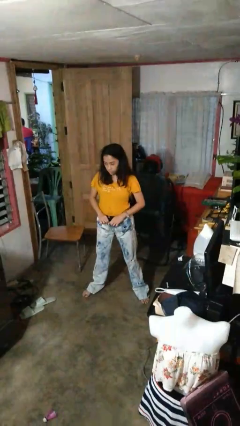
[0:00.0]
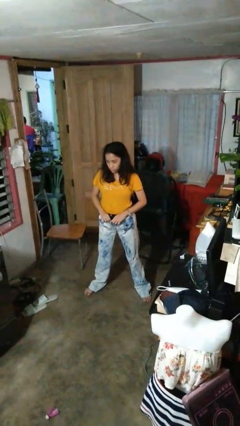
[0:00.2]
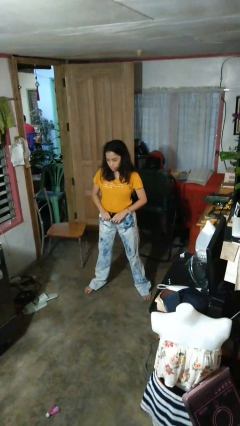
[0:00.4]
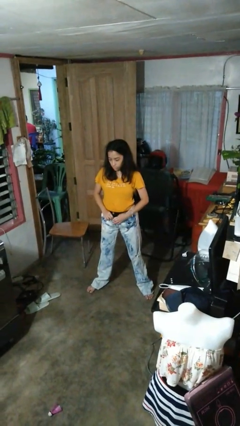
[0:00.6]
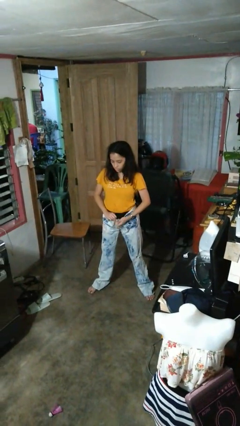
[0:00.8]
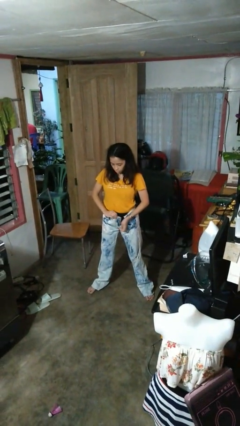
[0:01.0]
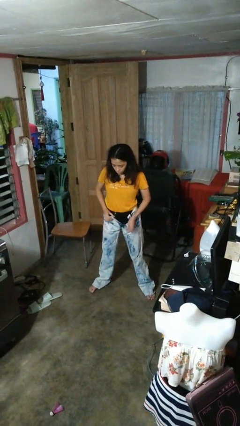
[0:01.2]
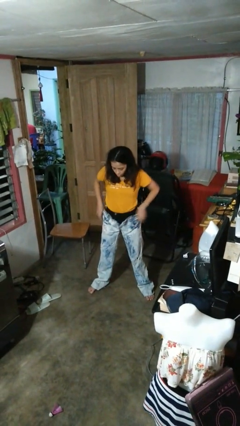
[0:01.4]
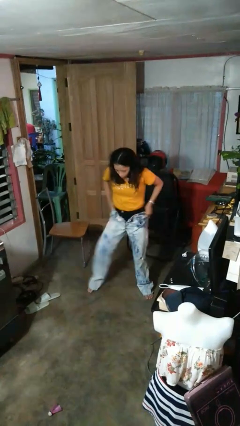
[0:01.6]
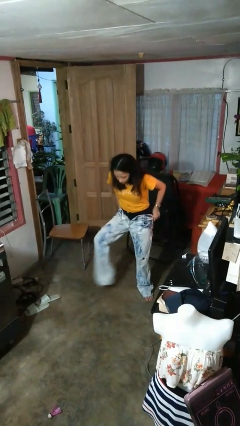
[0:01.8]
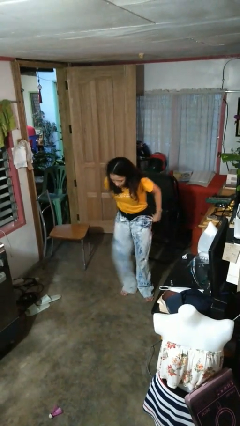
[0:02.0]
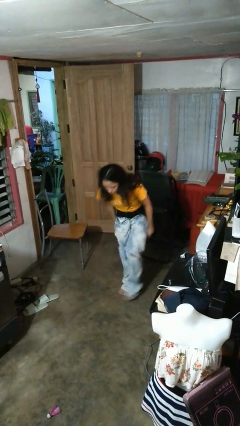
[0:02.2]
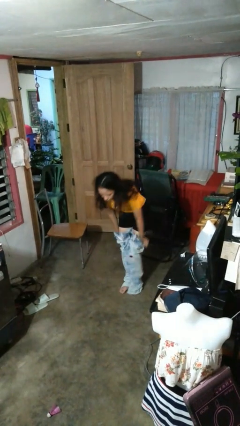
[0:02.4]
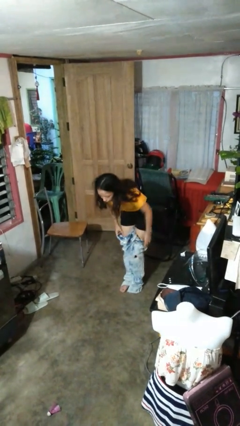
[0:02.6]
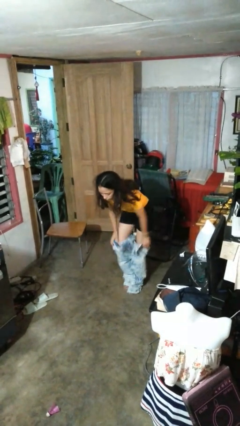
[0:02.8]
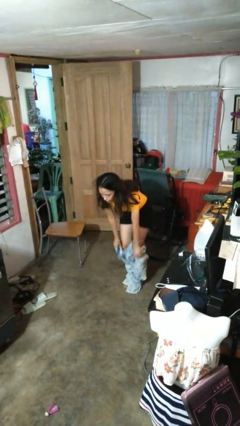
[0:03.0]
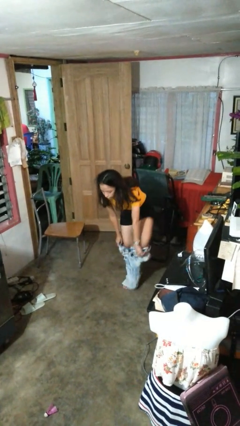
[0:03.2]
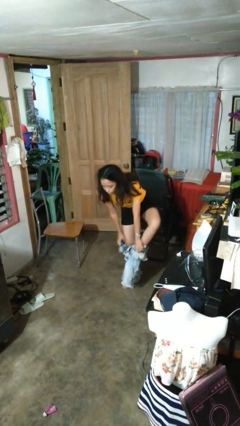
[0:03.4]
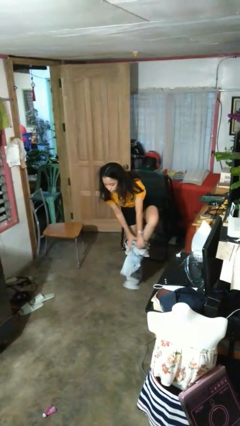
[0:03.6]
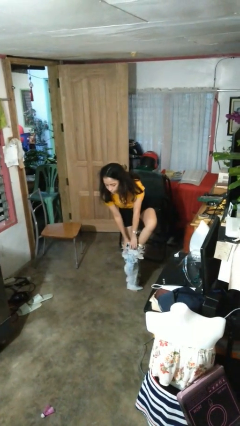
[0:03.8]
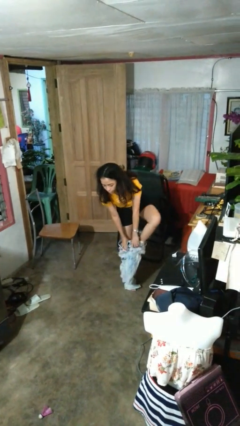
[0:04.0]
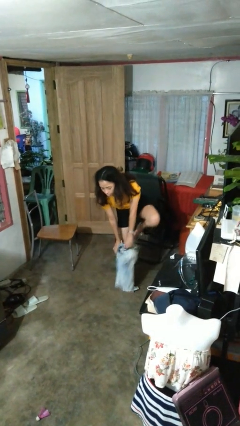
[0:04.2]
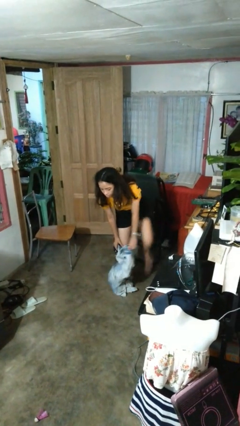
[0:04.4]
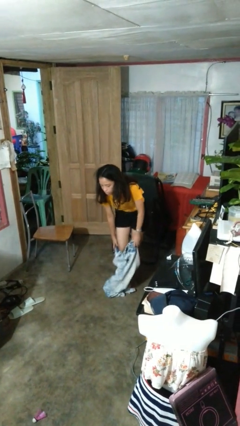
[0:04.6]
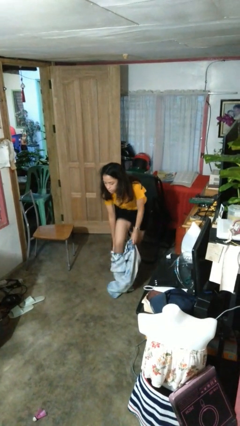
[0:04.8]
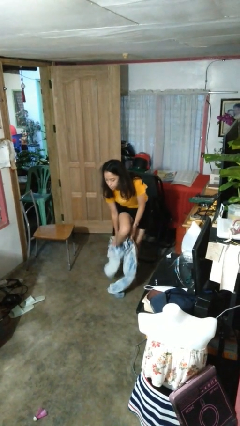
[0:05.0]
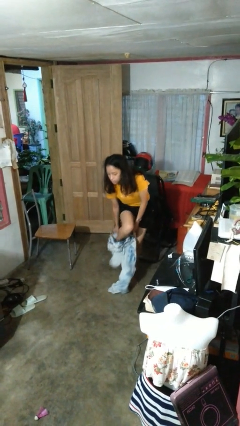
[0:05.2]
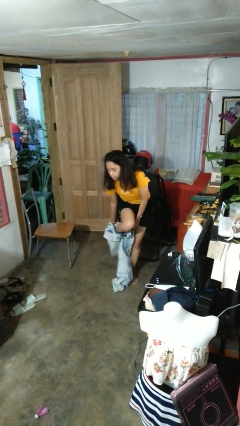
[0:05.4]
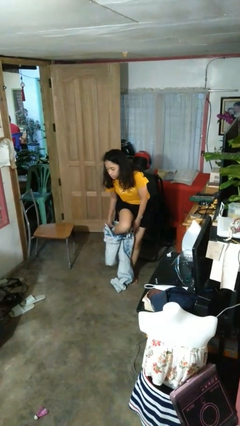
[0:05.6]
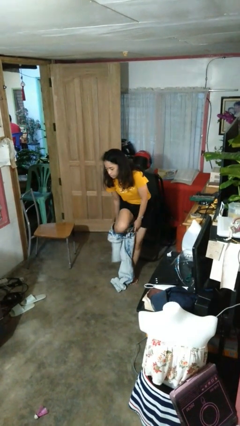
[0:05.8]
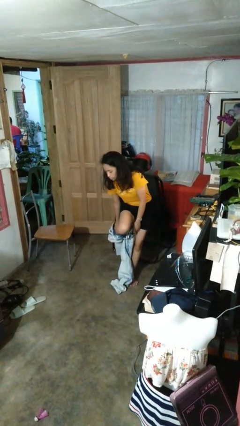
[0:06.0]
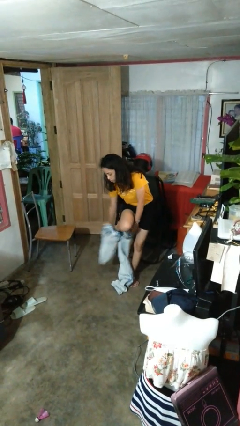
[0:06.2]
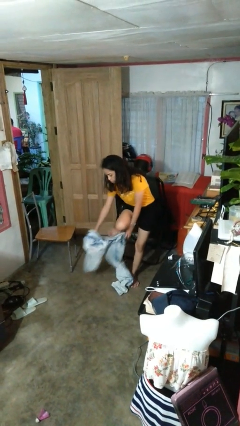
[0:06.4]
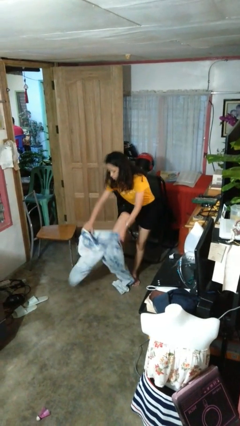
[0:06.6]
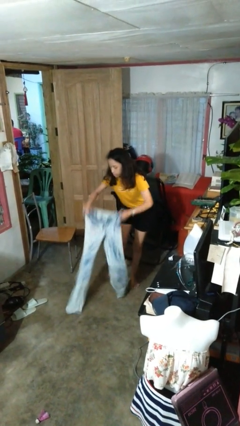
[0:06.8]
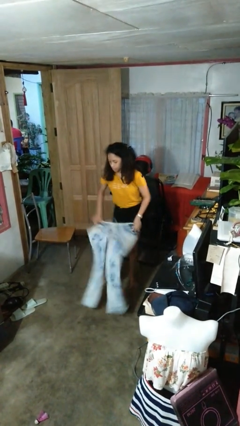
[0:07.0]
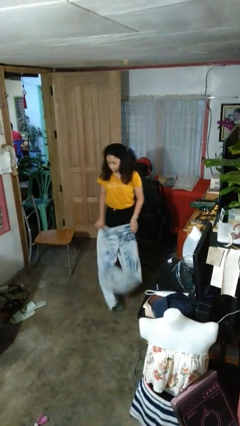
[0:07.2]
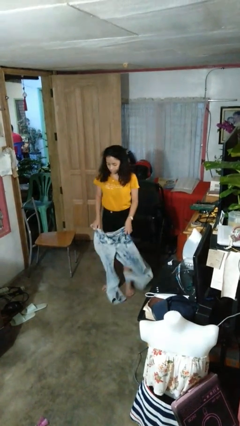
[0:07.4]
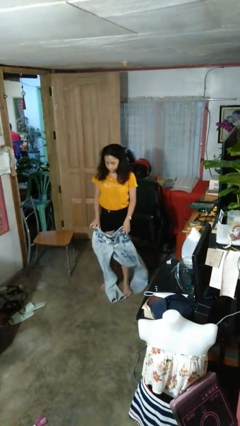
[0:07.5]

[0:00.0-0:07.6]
person takes off pants

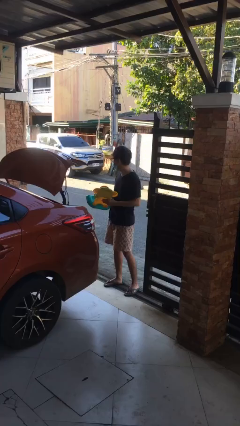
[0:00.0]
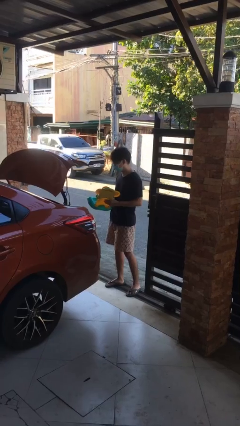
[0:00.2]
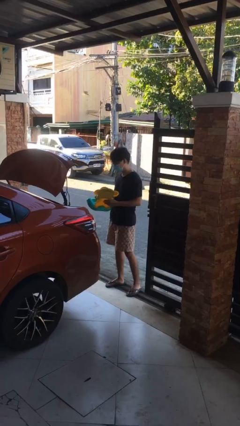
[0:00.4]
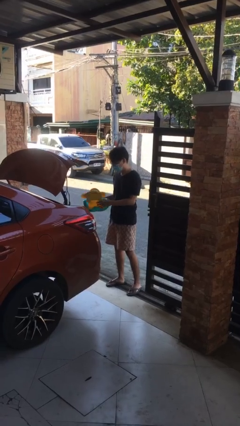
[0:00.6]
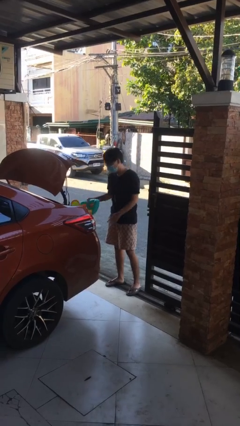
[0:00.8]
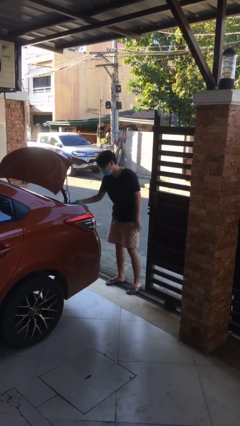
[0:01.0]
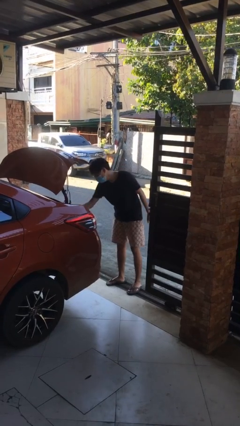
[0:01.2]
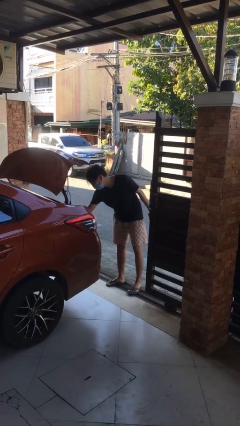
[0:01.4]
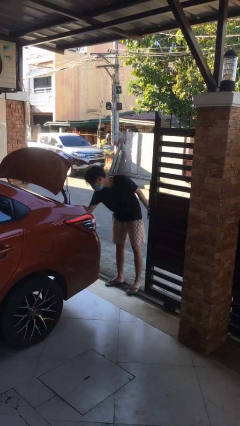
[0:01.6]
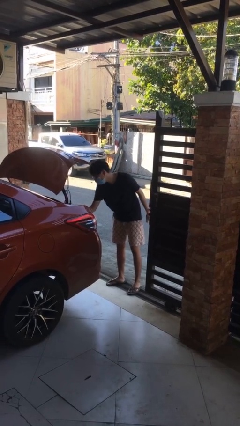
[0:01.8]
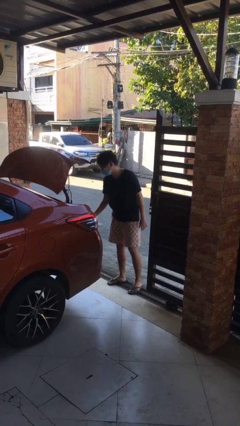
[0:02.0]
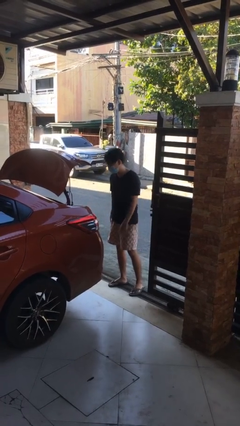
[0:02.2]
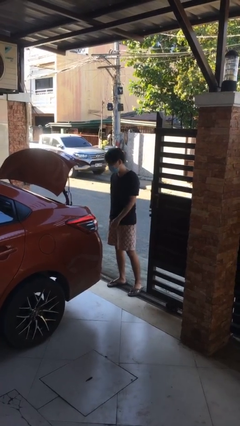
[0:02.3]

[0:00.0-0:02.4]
person loads car

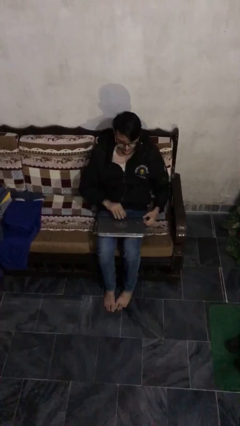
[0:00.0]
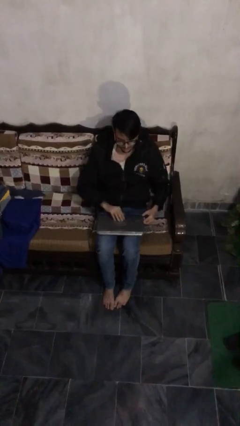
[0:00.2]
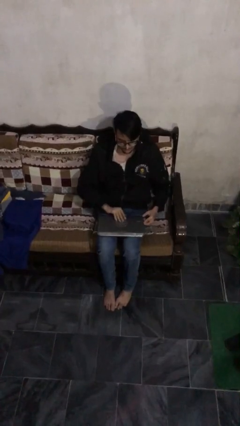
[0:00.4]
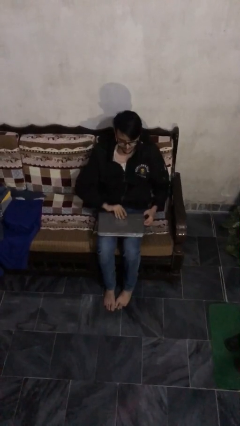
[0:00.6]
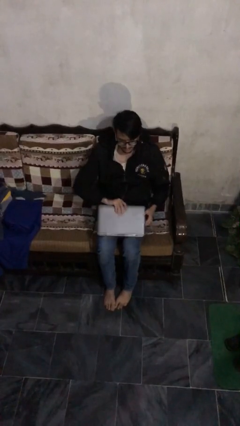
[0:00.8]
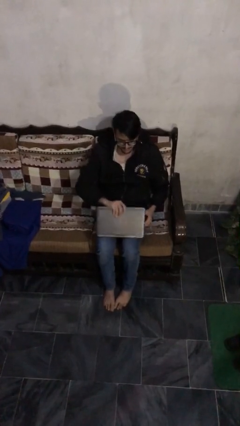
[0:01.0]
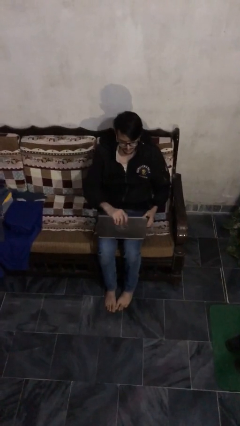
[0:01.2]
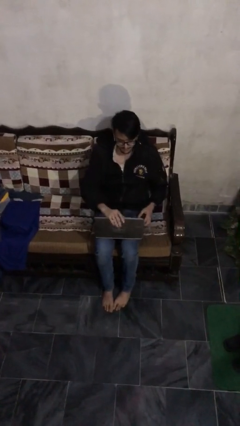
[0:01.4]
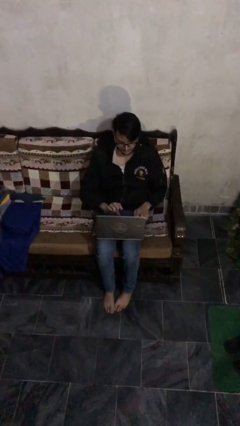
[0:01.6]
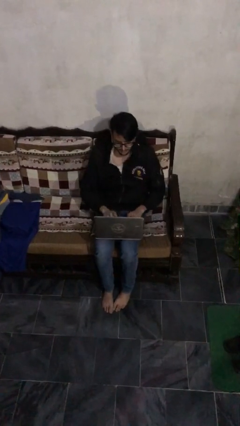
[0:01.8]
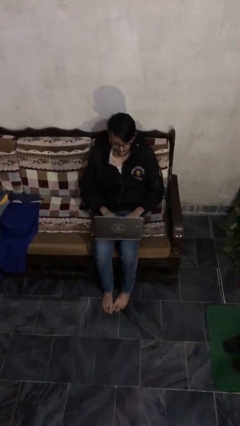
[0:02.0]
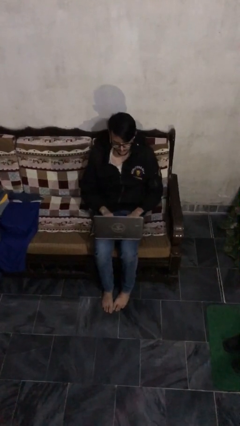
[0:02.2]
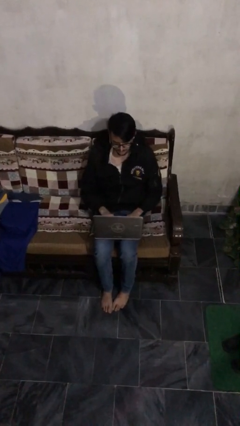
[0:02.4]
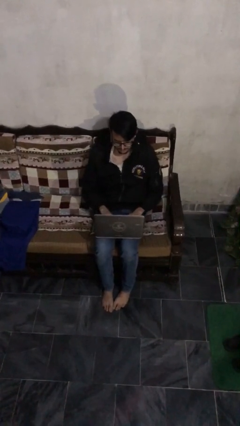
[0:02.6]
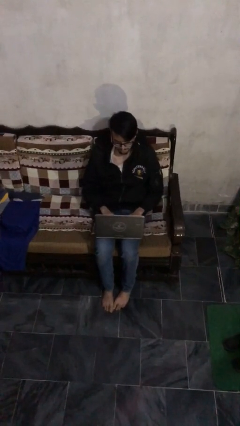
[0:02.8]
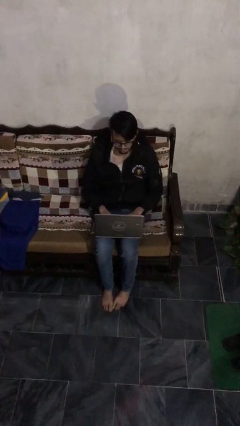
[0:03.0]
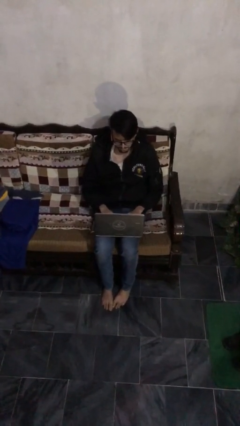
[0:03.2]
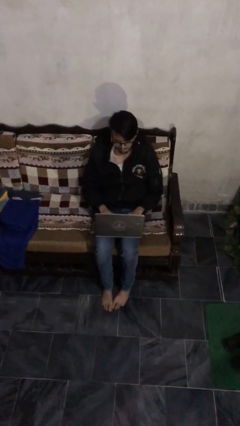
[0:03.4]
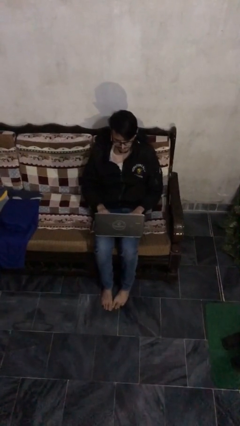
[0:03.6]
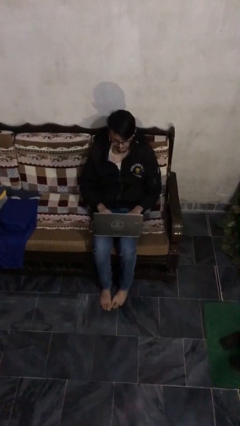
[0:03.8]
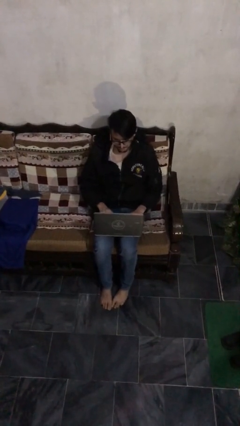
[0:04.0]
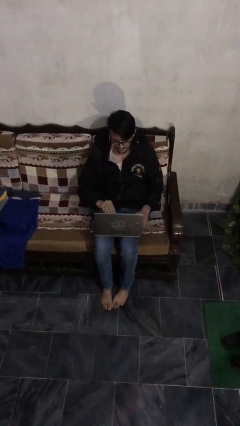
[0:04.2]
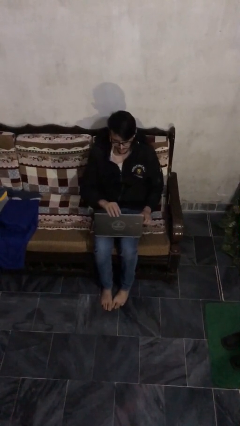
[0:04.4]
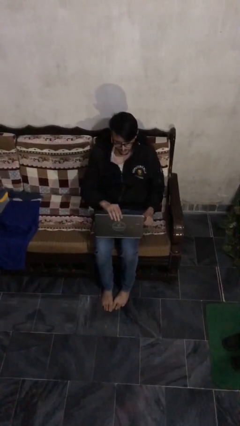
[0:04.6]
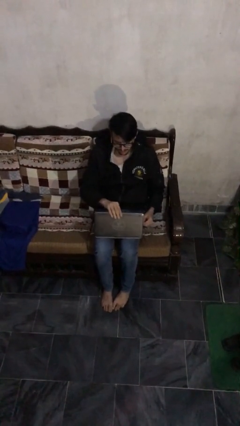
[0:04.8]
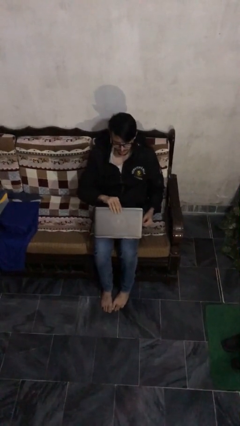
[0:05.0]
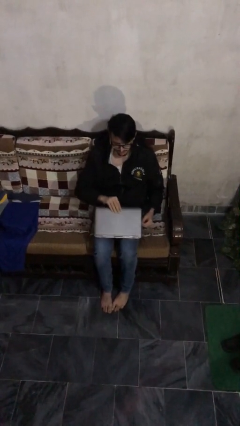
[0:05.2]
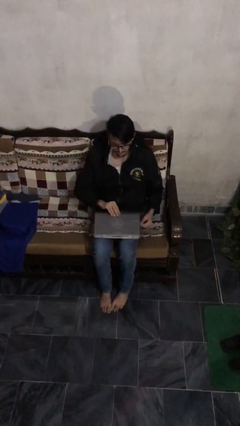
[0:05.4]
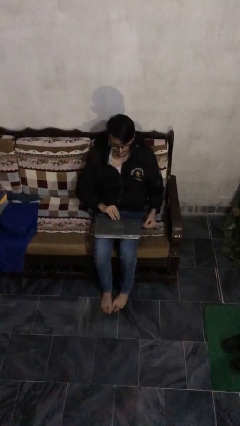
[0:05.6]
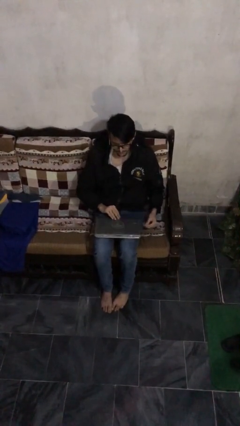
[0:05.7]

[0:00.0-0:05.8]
person interacts with laptop

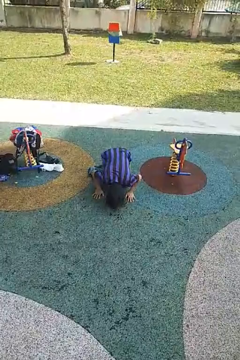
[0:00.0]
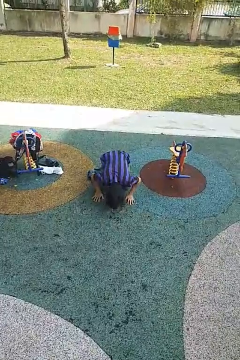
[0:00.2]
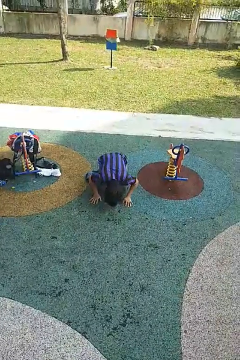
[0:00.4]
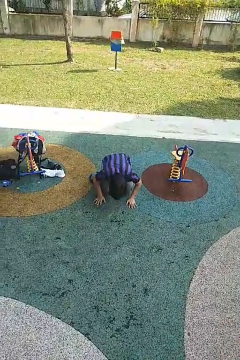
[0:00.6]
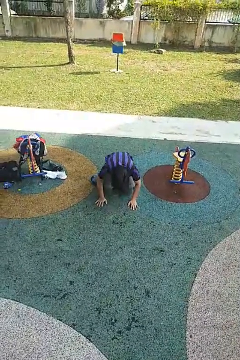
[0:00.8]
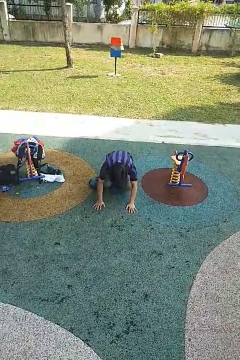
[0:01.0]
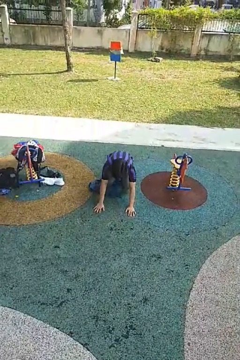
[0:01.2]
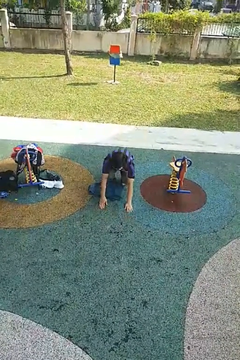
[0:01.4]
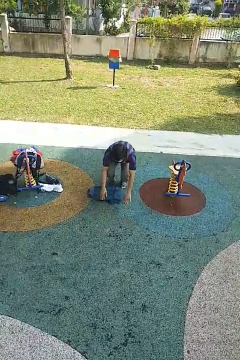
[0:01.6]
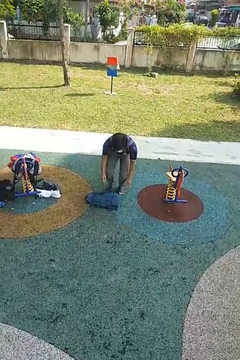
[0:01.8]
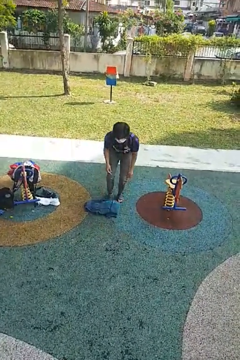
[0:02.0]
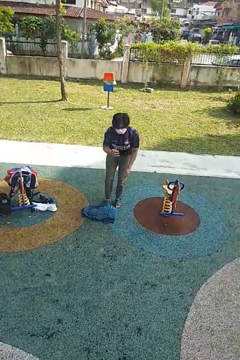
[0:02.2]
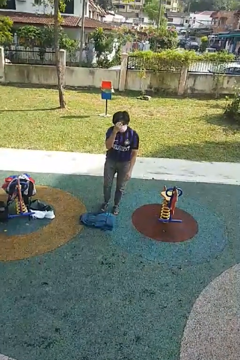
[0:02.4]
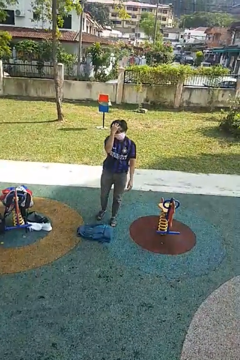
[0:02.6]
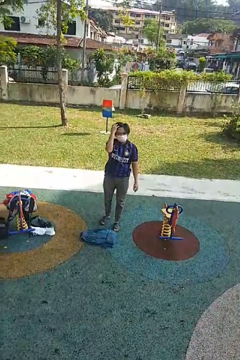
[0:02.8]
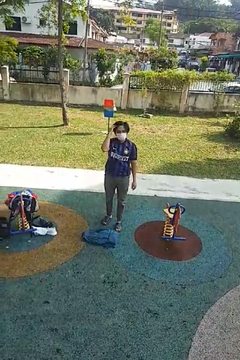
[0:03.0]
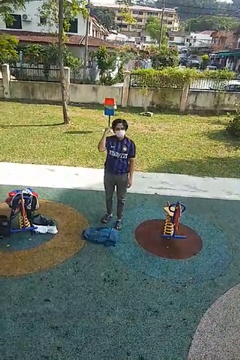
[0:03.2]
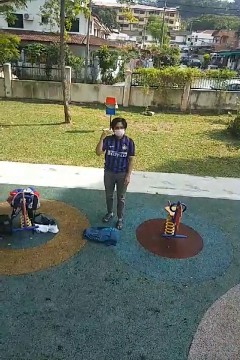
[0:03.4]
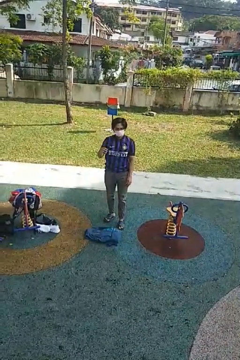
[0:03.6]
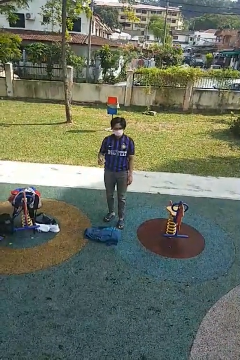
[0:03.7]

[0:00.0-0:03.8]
person stands up from floor
